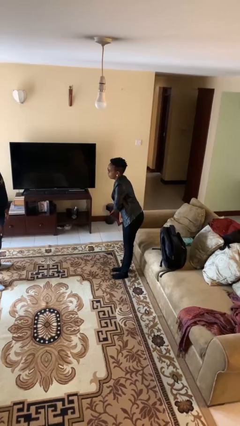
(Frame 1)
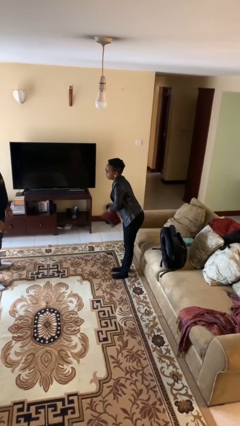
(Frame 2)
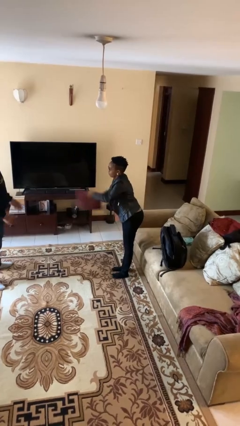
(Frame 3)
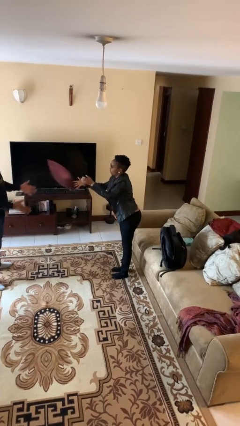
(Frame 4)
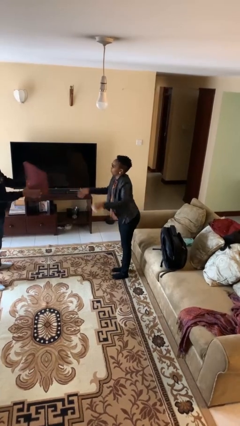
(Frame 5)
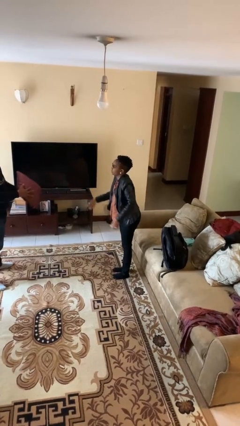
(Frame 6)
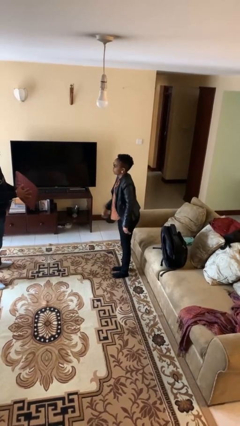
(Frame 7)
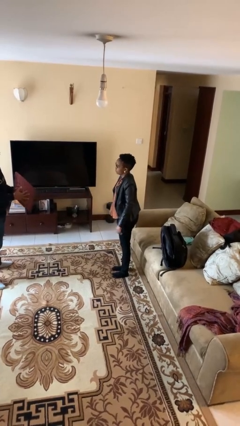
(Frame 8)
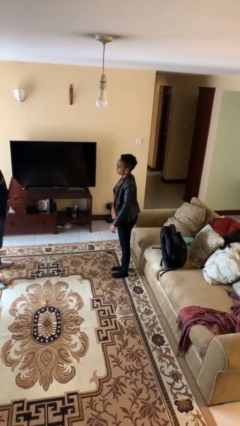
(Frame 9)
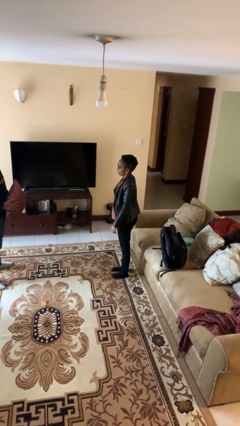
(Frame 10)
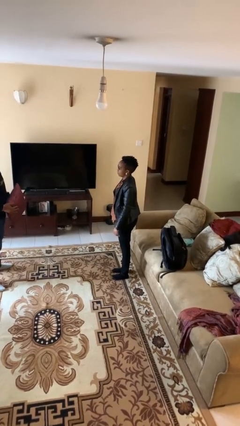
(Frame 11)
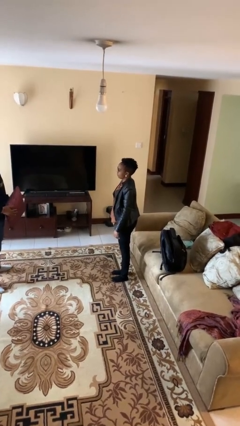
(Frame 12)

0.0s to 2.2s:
person throws object to person

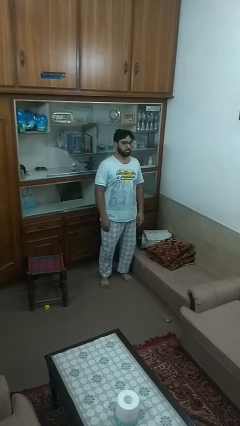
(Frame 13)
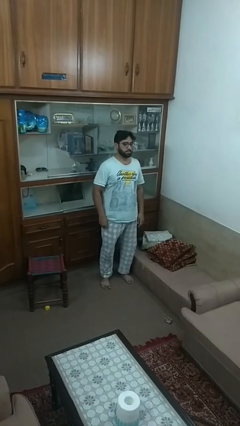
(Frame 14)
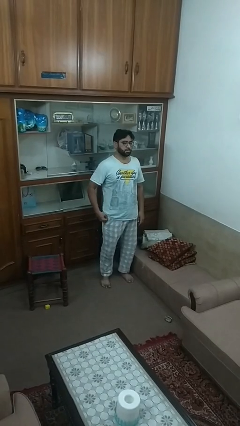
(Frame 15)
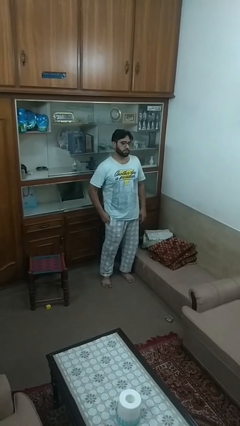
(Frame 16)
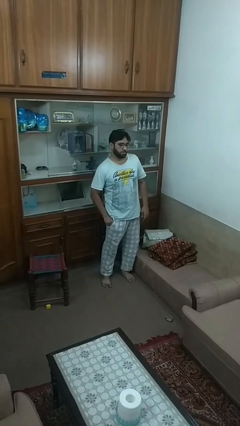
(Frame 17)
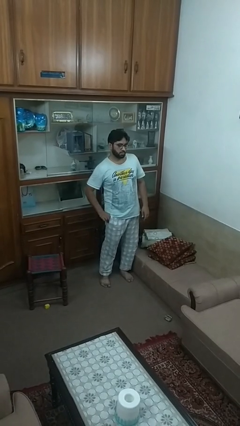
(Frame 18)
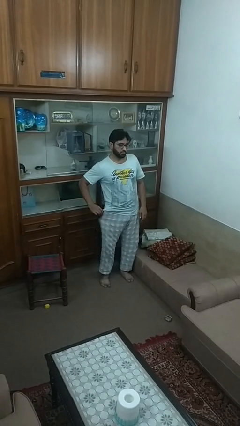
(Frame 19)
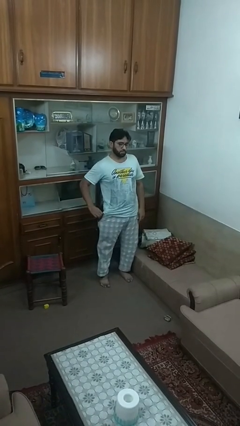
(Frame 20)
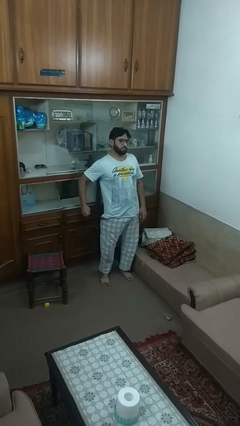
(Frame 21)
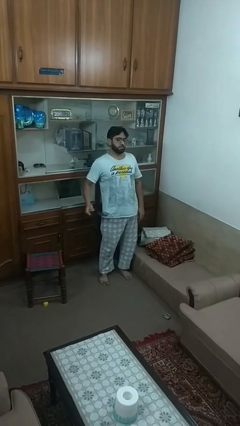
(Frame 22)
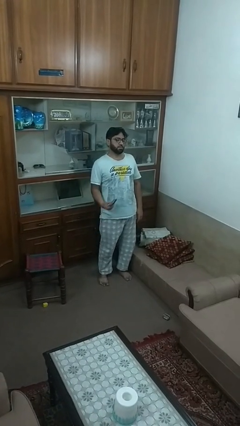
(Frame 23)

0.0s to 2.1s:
person takes phone from pocket

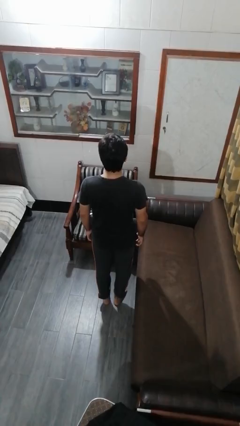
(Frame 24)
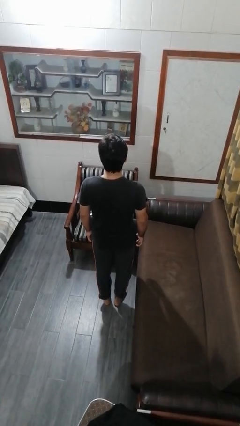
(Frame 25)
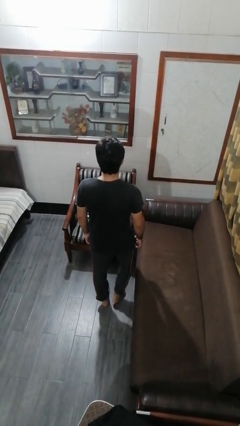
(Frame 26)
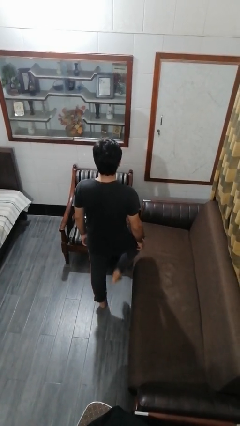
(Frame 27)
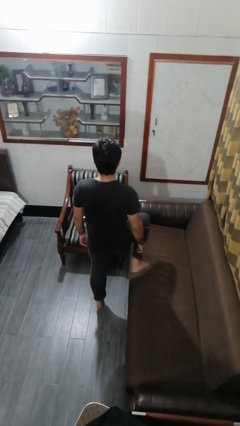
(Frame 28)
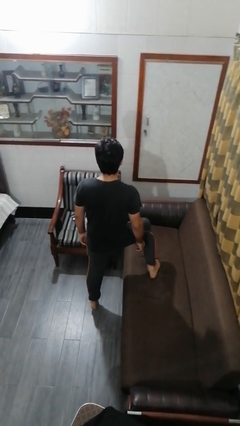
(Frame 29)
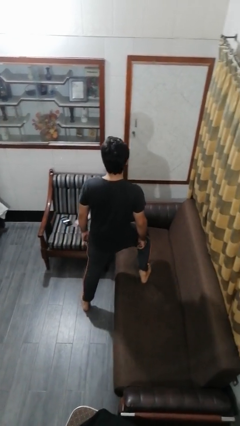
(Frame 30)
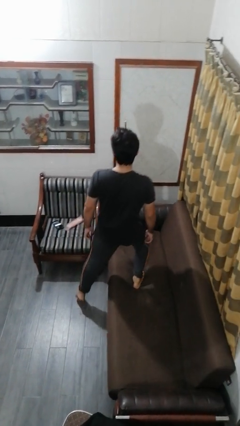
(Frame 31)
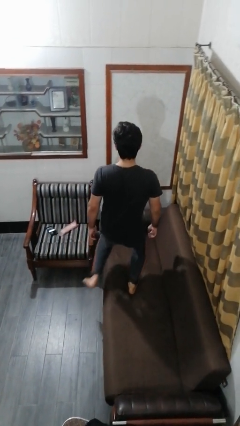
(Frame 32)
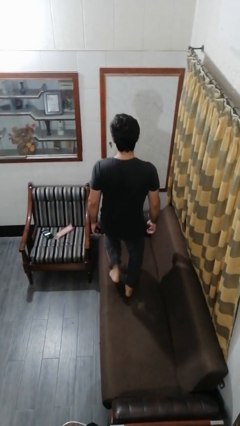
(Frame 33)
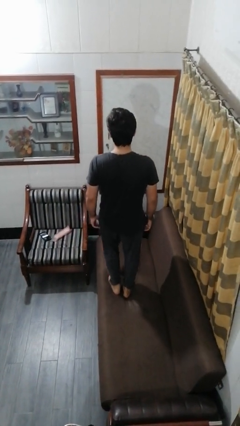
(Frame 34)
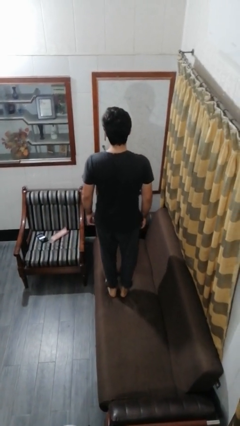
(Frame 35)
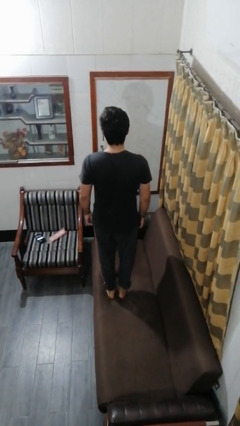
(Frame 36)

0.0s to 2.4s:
person climbs on couch

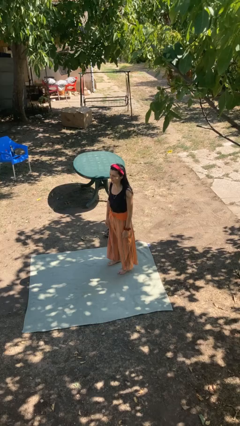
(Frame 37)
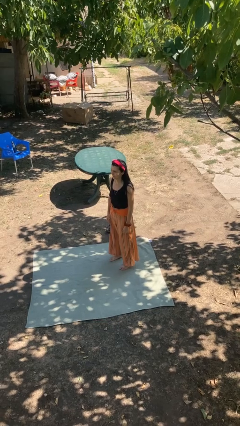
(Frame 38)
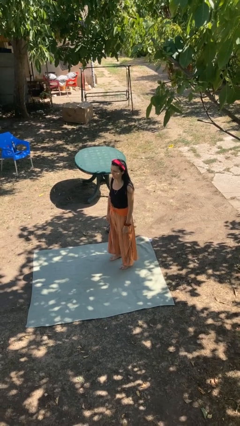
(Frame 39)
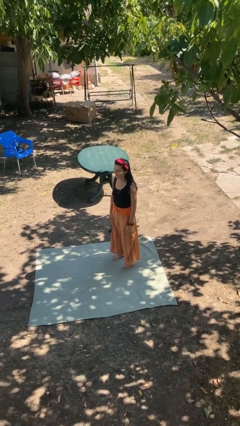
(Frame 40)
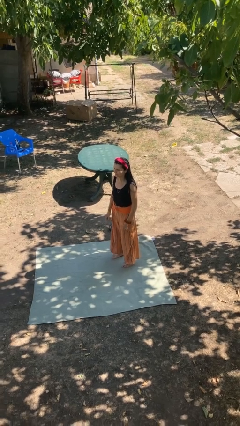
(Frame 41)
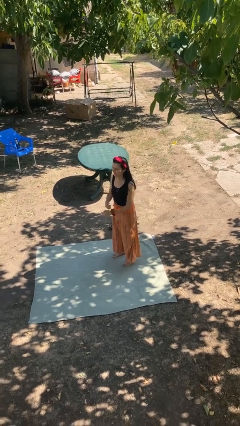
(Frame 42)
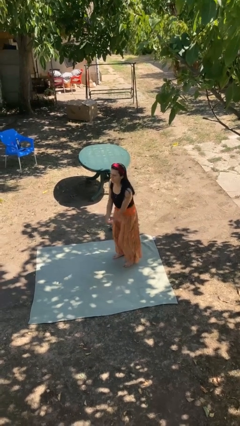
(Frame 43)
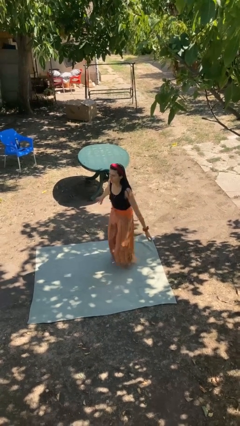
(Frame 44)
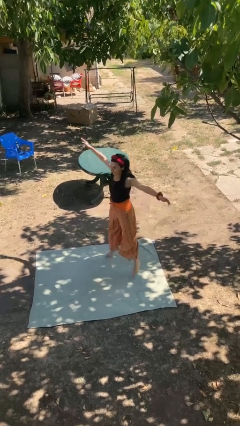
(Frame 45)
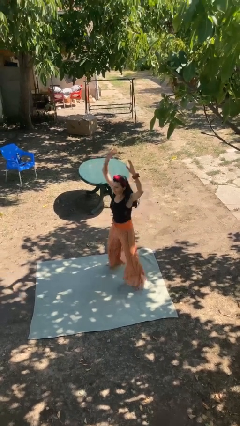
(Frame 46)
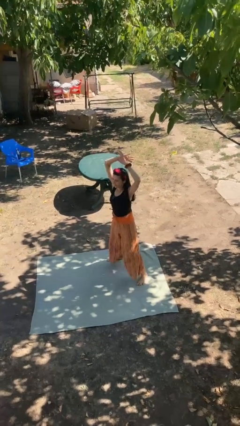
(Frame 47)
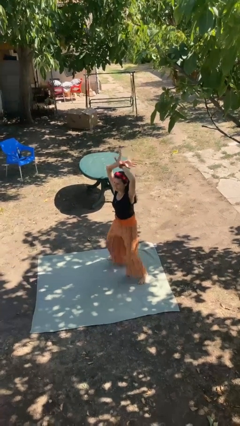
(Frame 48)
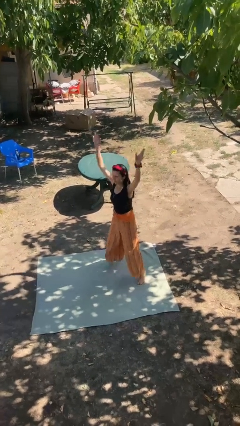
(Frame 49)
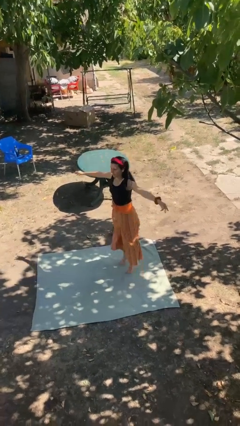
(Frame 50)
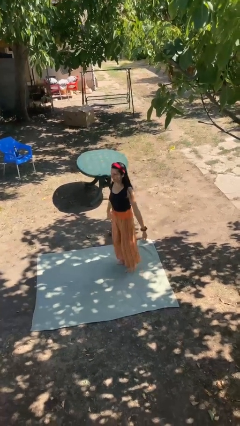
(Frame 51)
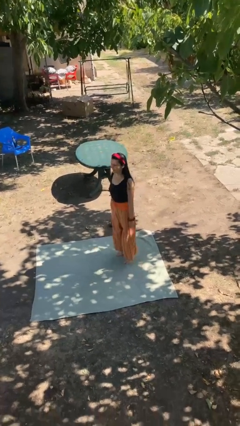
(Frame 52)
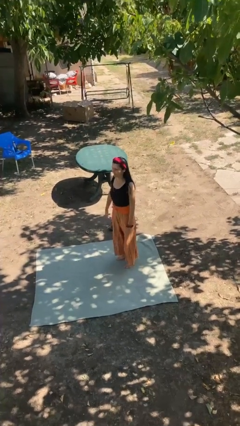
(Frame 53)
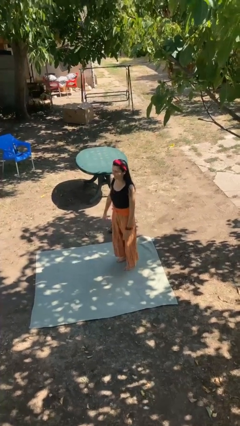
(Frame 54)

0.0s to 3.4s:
person exercises with jumping jacks

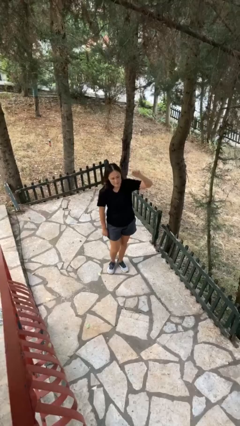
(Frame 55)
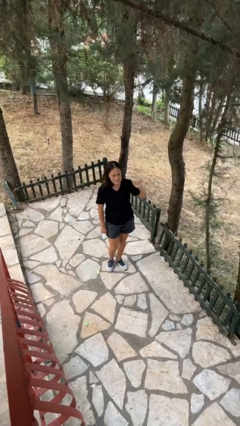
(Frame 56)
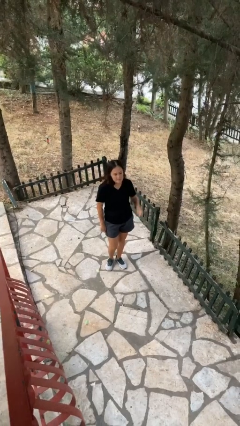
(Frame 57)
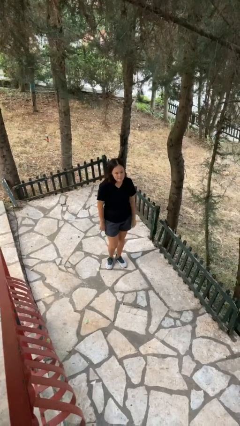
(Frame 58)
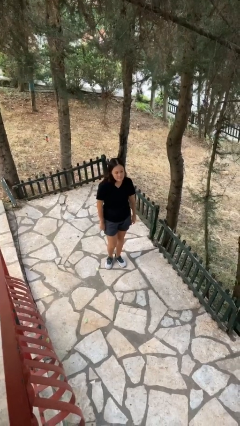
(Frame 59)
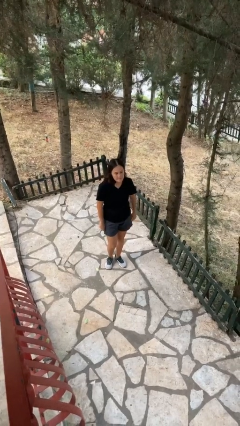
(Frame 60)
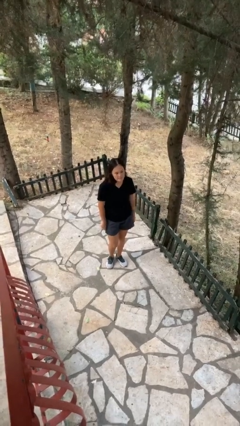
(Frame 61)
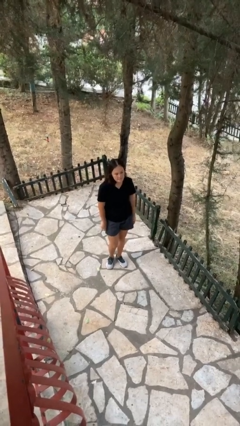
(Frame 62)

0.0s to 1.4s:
person gestures lower hand

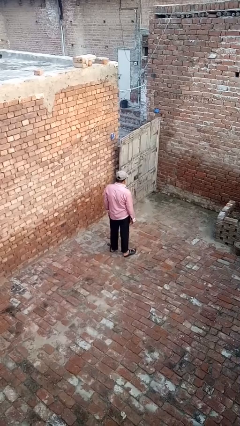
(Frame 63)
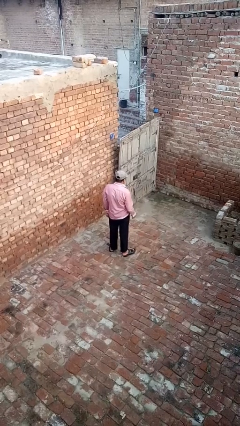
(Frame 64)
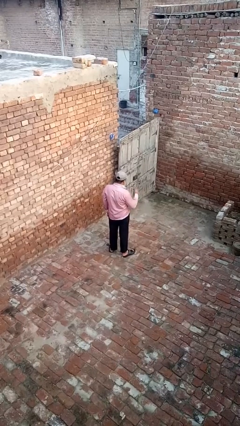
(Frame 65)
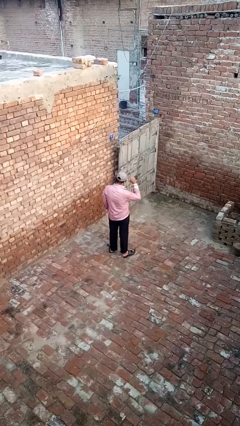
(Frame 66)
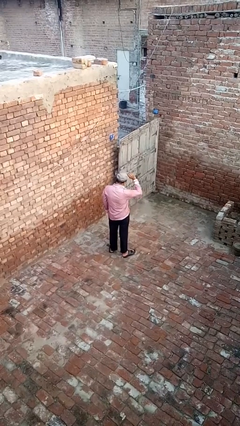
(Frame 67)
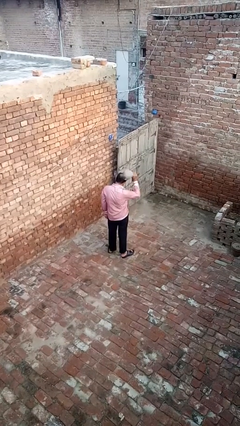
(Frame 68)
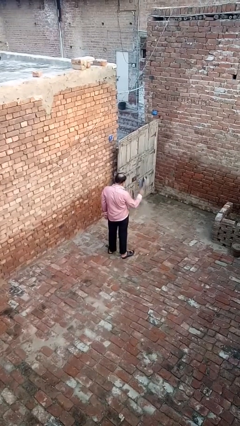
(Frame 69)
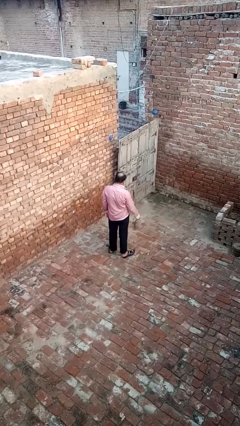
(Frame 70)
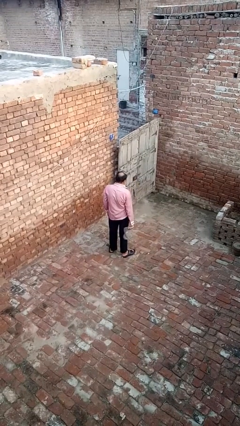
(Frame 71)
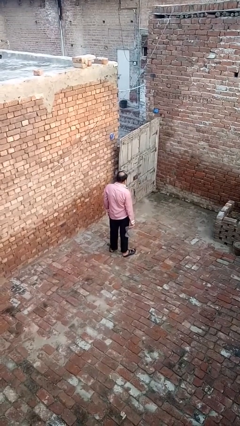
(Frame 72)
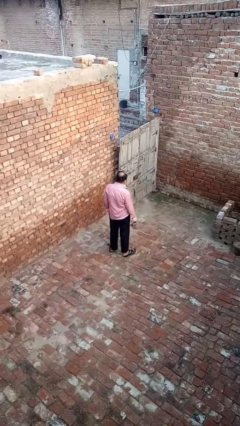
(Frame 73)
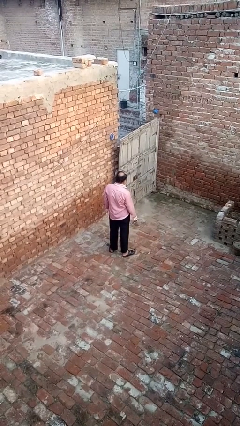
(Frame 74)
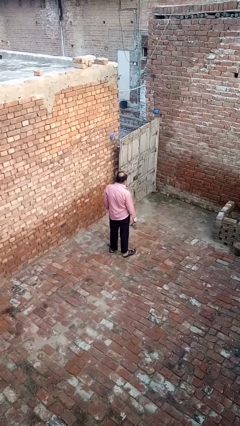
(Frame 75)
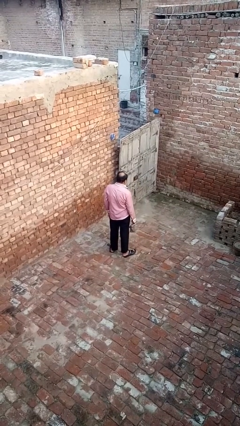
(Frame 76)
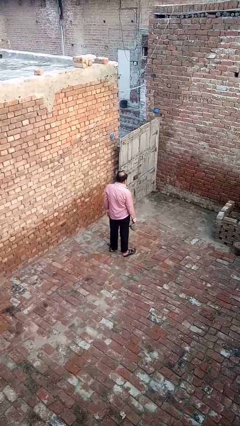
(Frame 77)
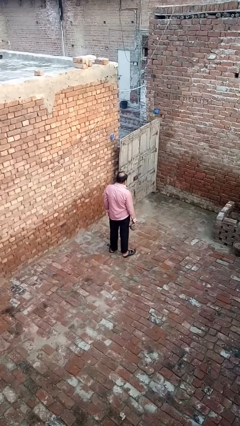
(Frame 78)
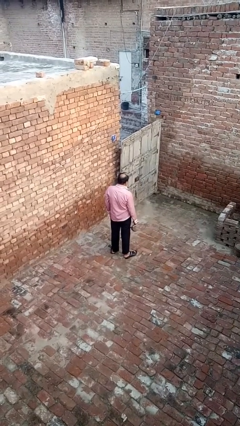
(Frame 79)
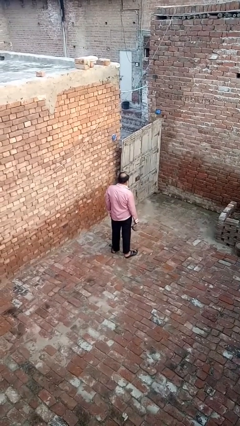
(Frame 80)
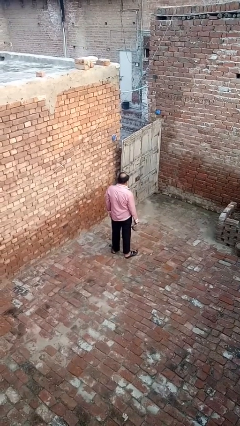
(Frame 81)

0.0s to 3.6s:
person takes off hat

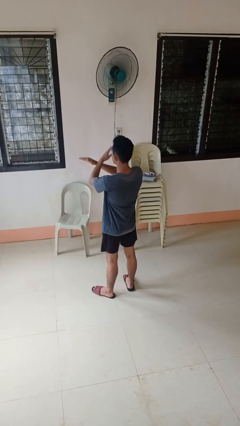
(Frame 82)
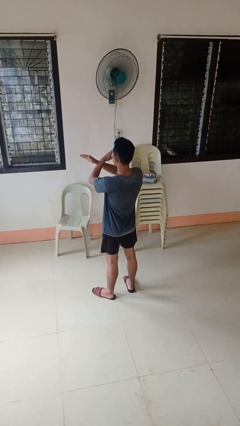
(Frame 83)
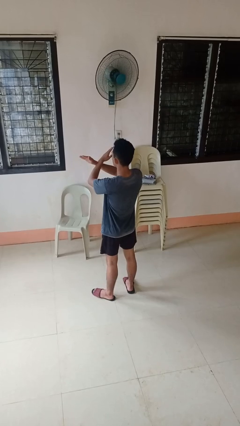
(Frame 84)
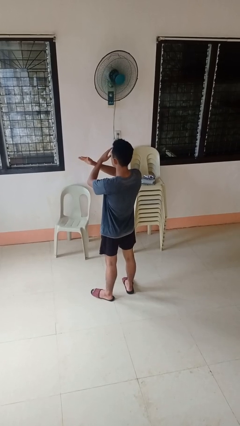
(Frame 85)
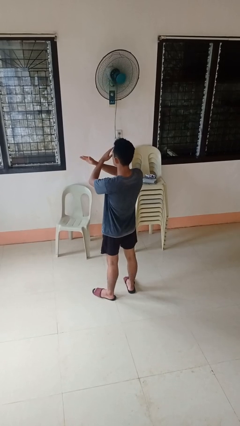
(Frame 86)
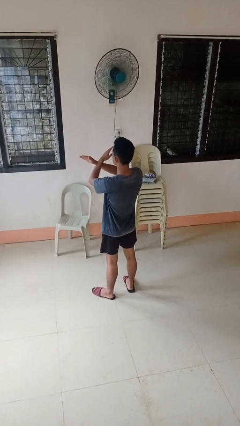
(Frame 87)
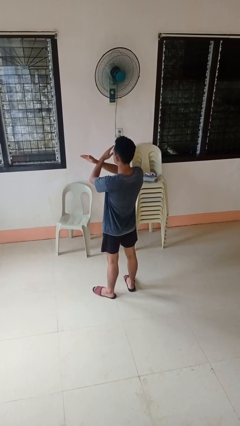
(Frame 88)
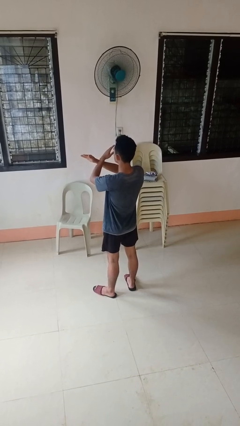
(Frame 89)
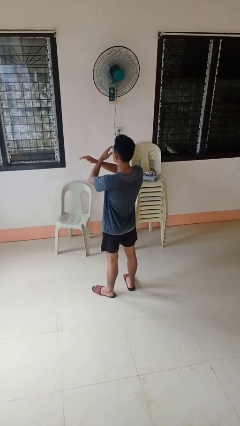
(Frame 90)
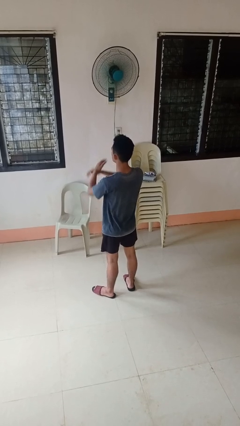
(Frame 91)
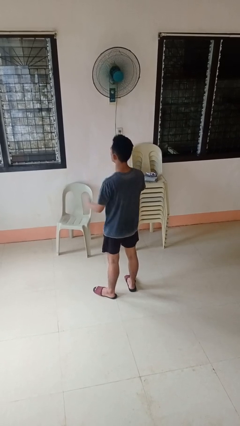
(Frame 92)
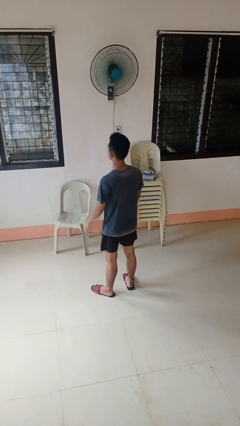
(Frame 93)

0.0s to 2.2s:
person gestures arms x
